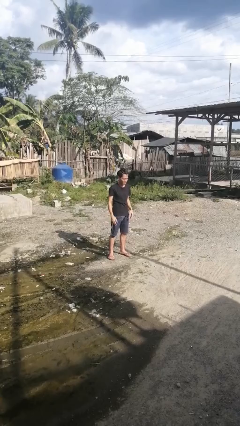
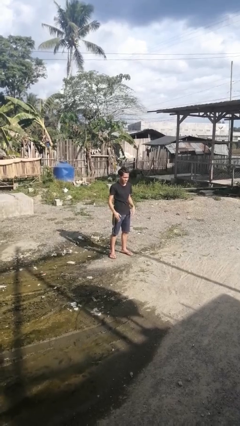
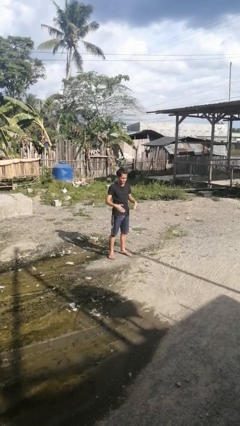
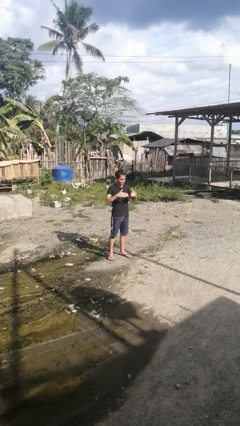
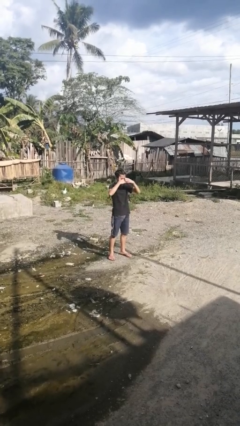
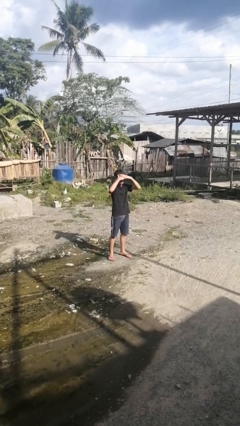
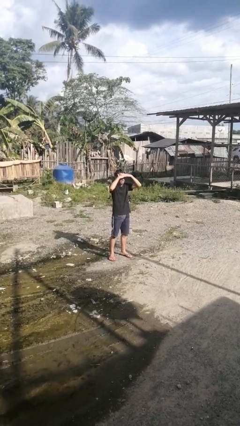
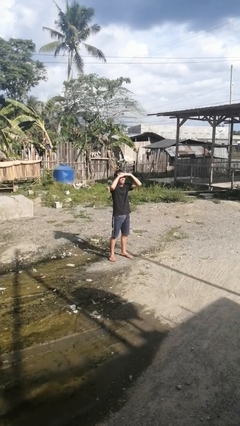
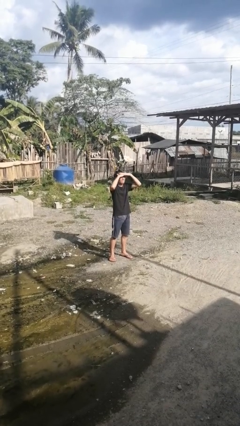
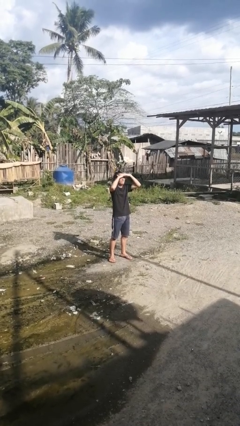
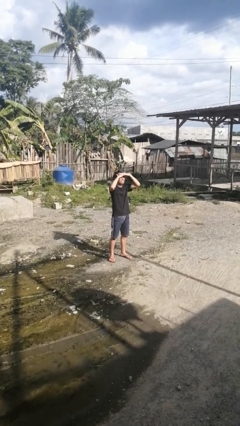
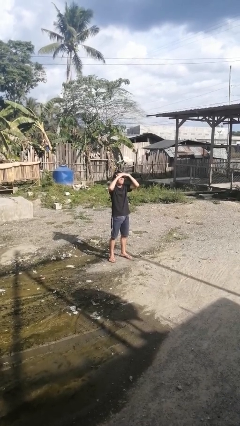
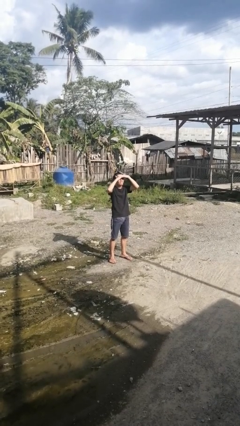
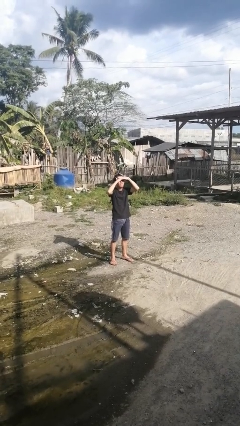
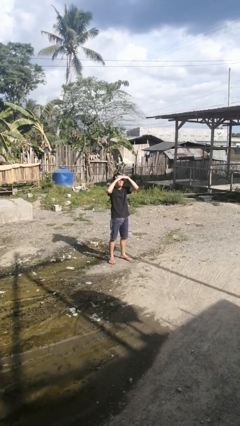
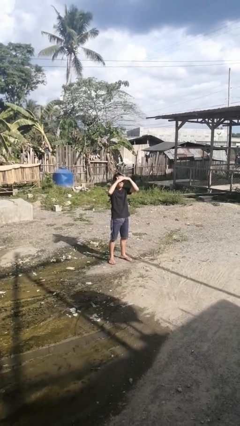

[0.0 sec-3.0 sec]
person shades eyes

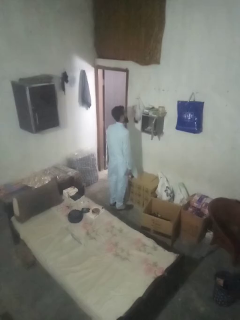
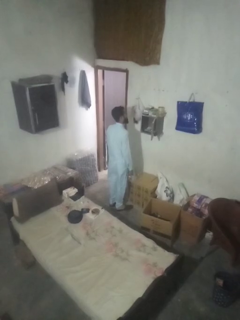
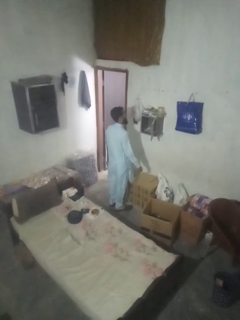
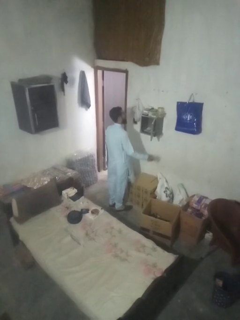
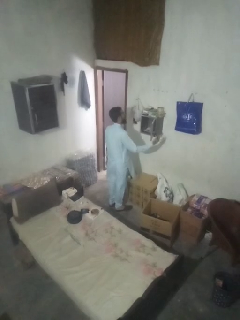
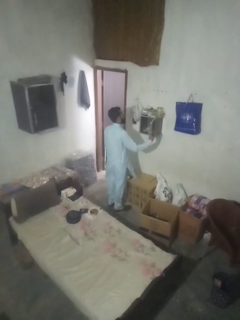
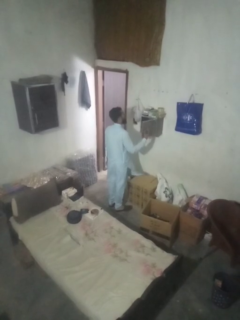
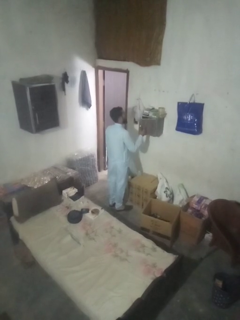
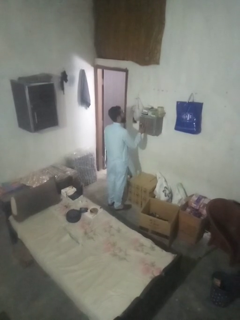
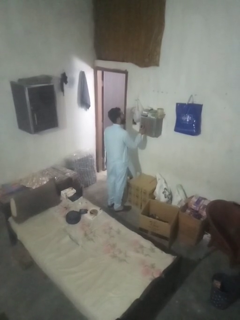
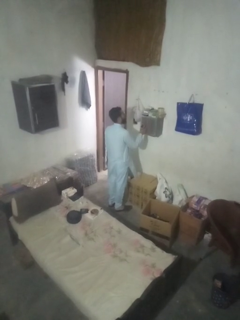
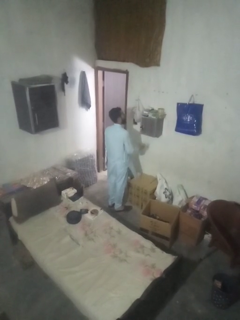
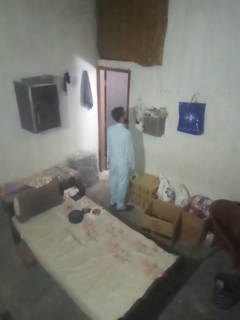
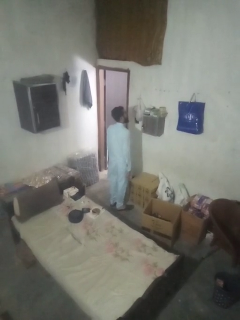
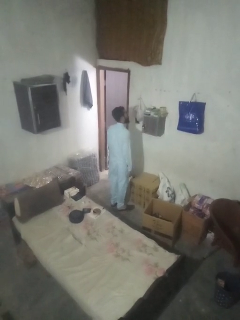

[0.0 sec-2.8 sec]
person closes mailbox

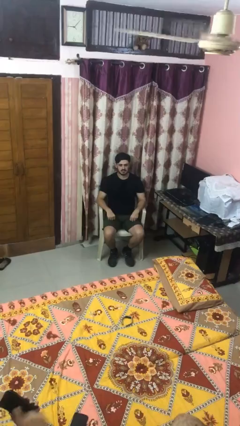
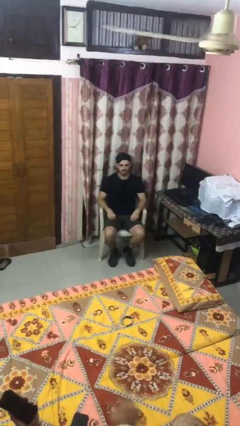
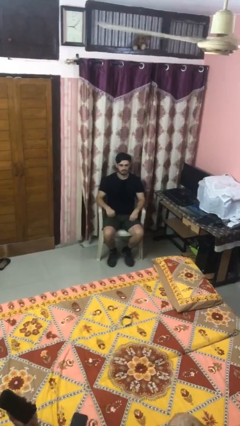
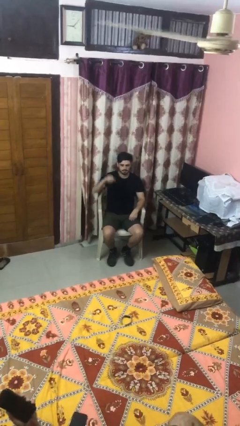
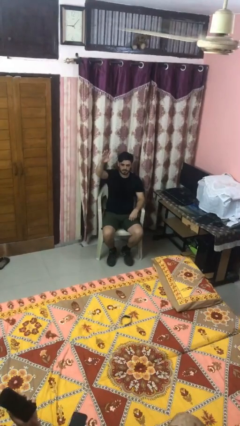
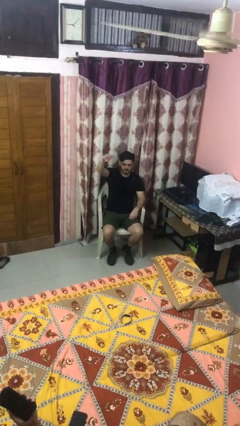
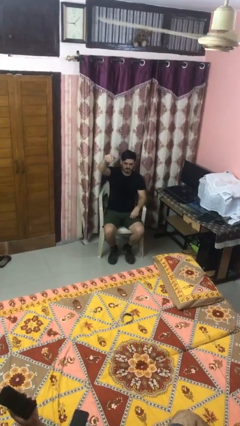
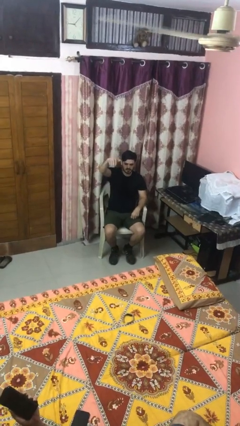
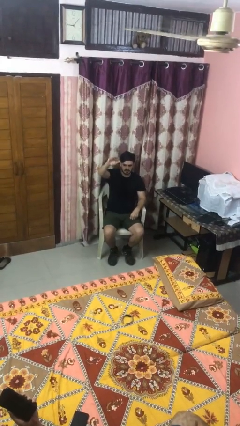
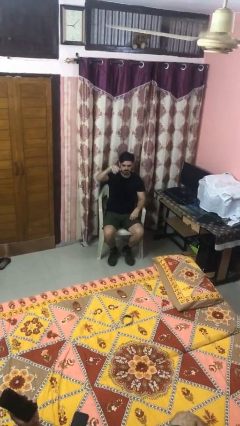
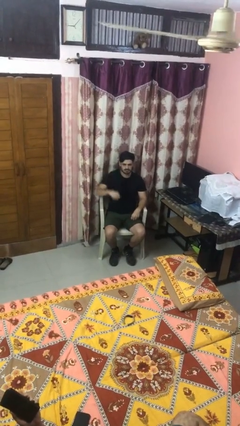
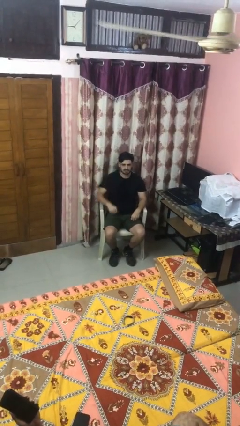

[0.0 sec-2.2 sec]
person gestures come here

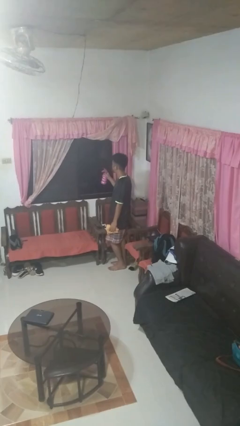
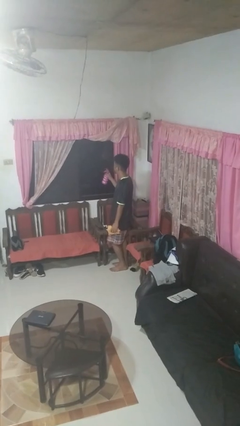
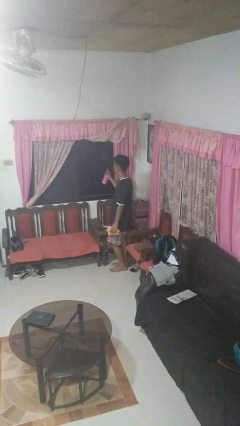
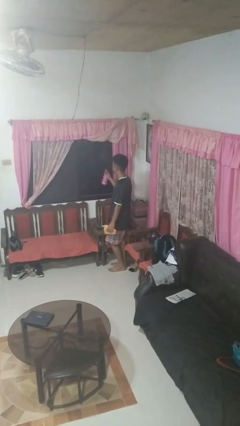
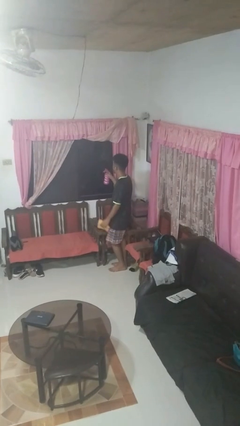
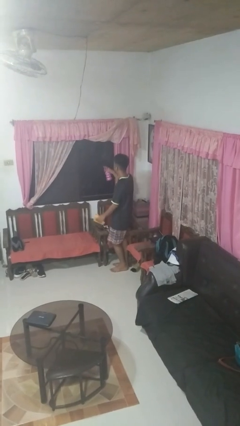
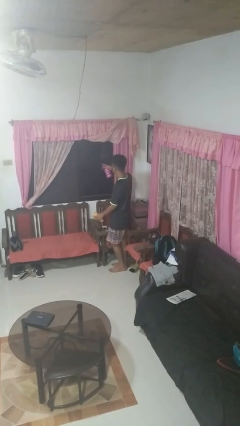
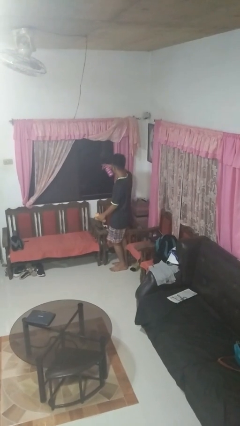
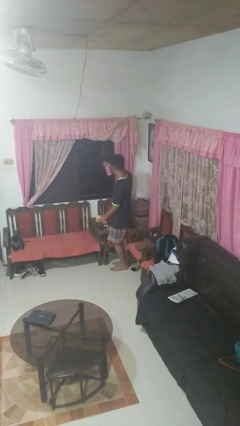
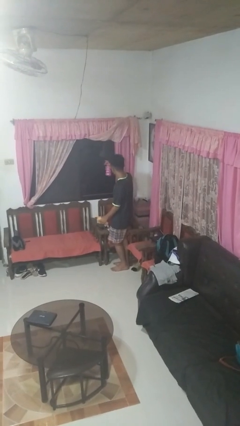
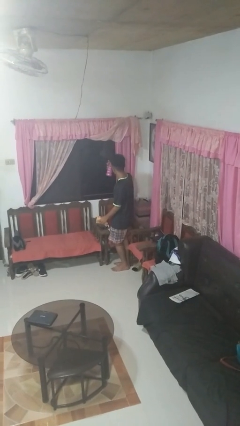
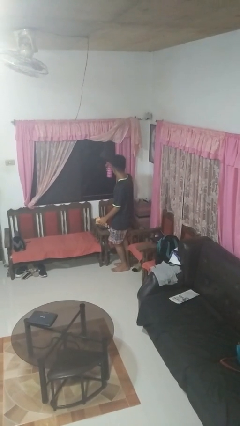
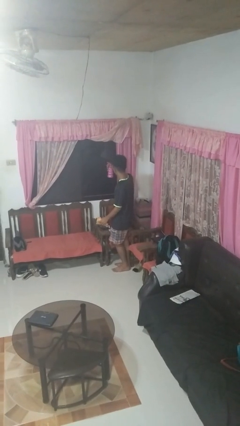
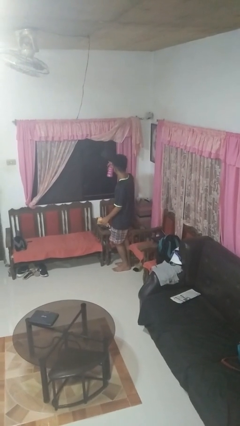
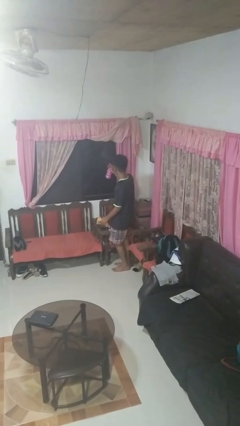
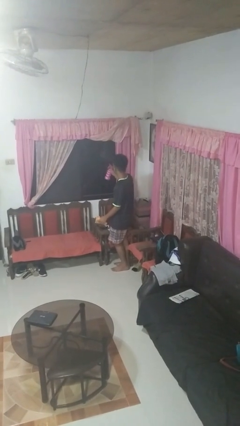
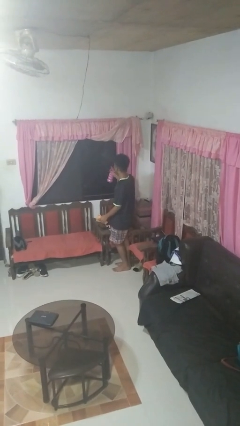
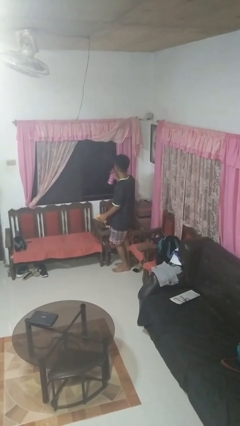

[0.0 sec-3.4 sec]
person sprays from bottle

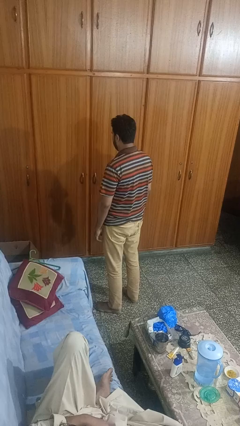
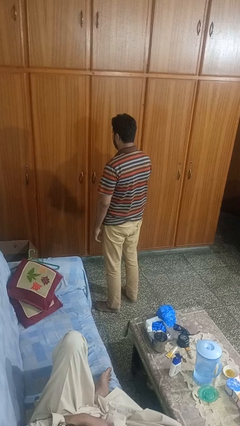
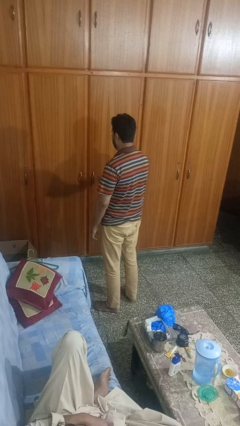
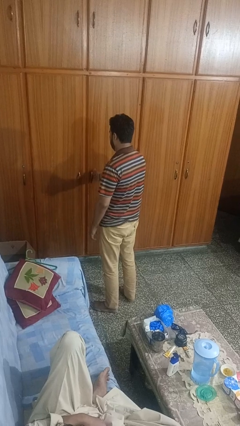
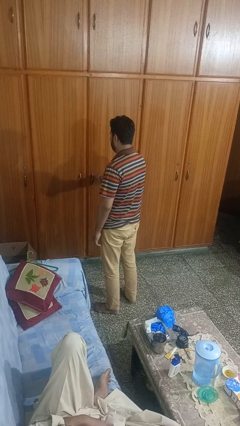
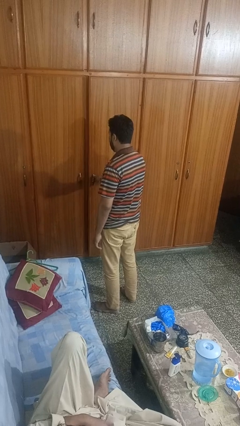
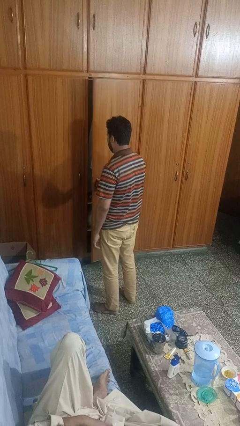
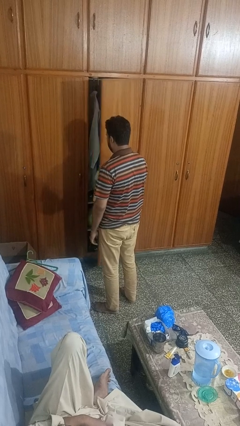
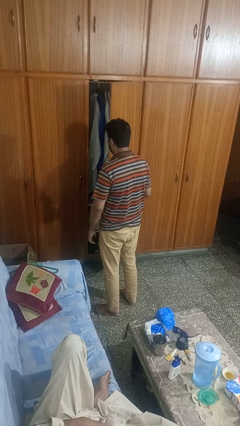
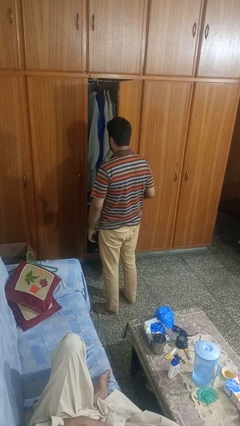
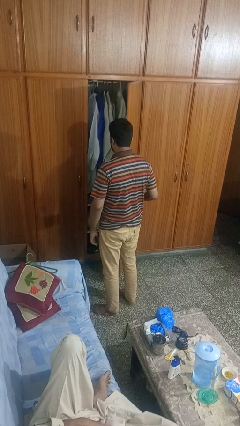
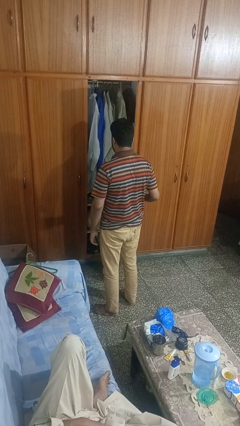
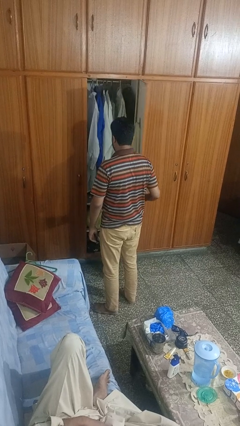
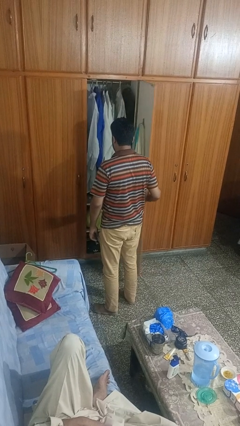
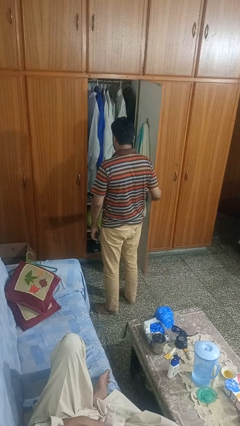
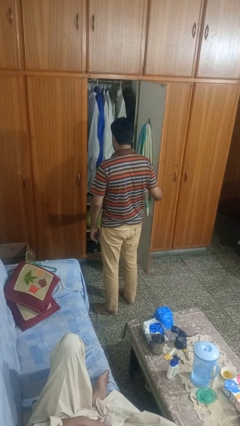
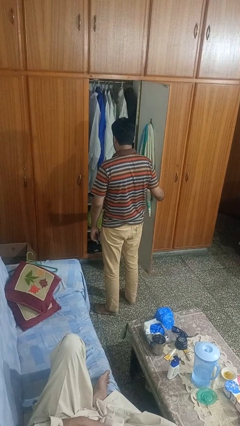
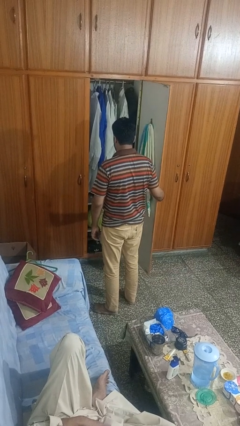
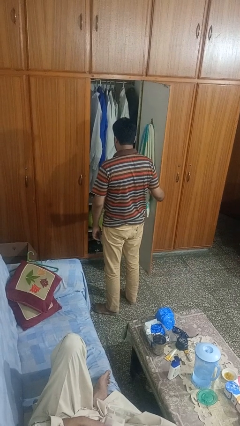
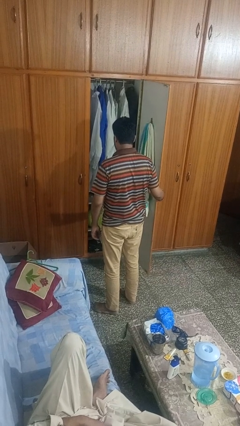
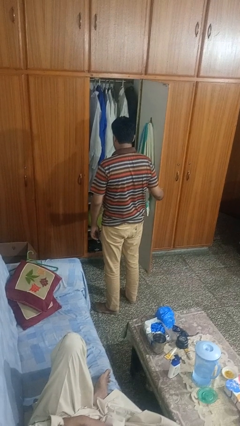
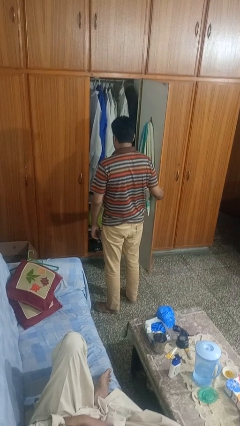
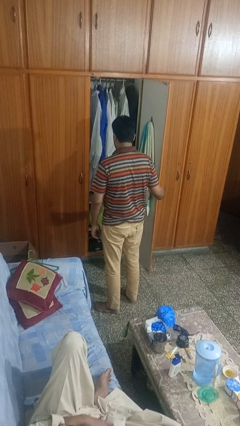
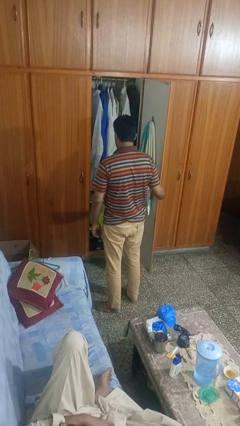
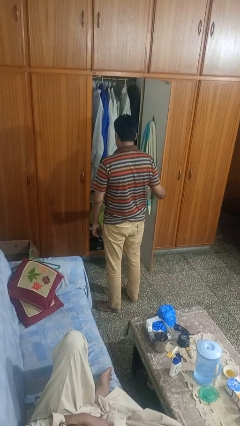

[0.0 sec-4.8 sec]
person opens closet door

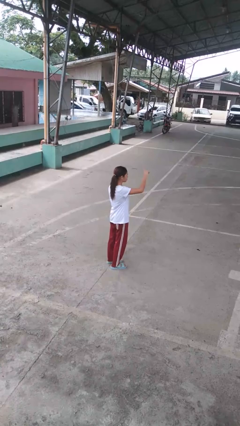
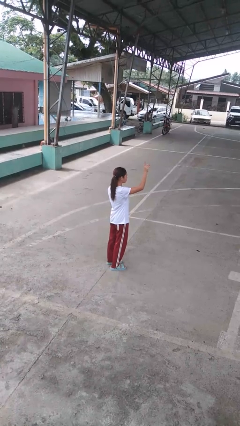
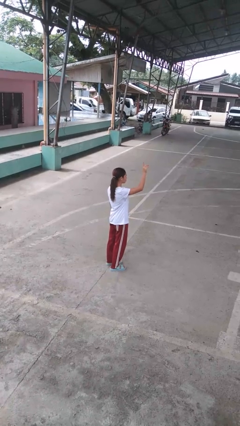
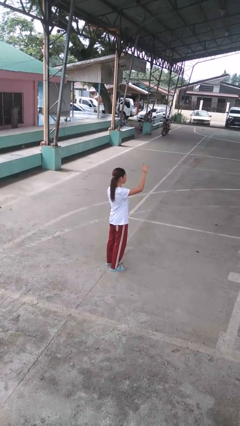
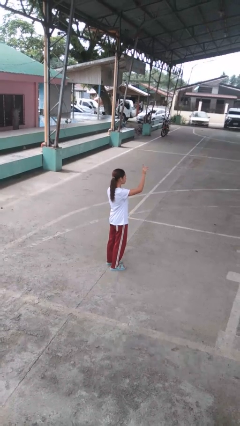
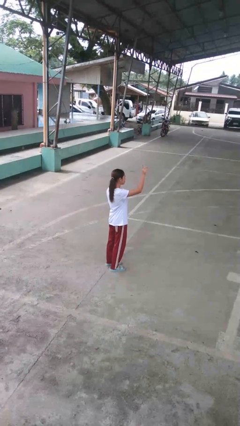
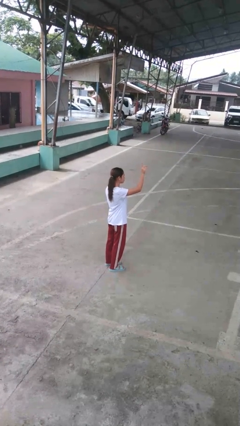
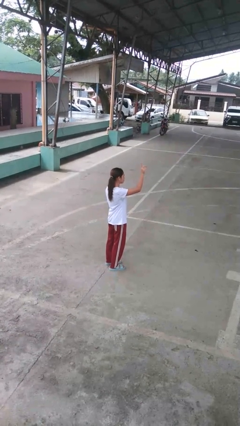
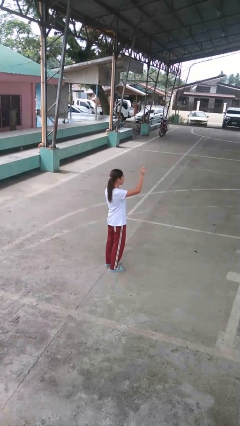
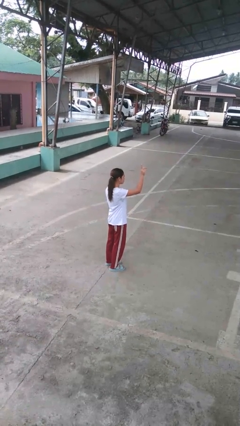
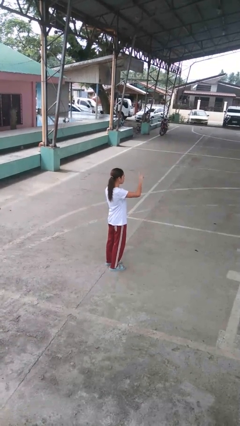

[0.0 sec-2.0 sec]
person gestures swipe up
